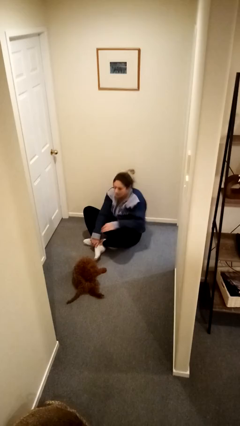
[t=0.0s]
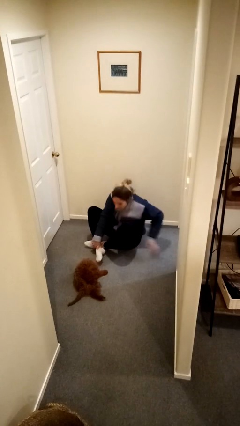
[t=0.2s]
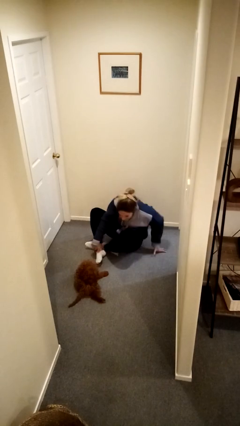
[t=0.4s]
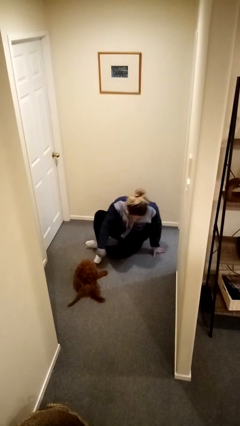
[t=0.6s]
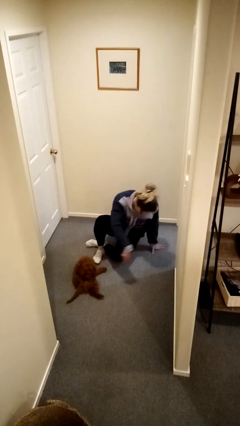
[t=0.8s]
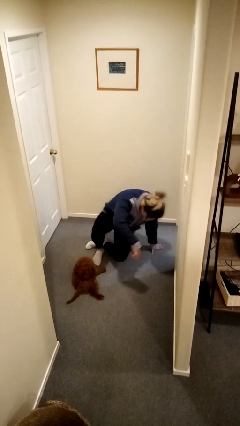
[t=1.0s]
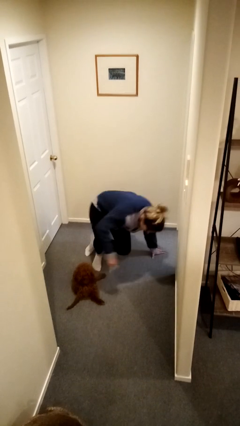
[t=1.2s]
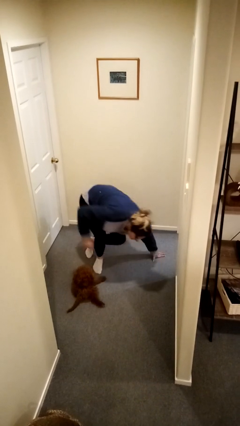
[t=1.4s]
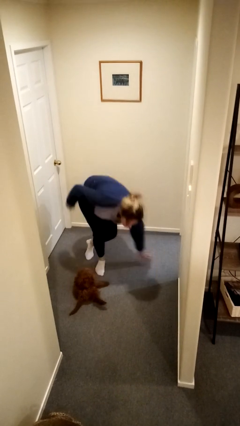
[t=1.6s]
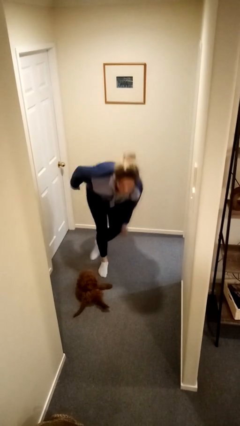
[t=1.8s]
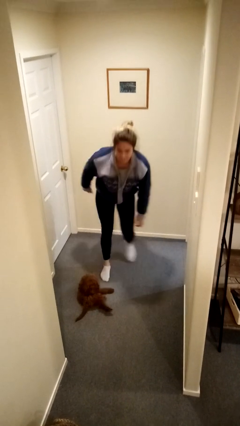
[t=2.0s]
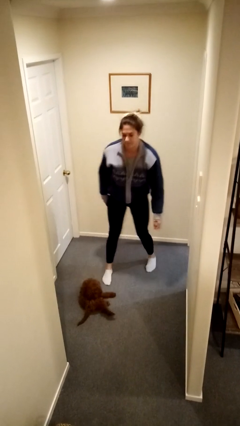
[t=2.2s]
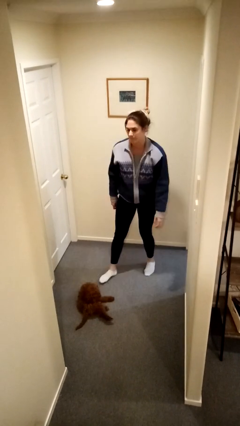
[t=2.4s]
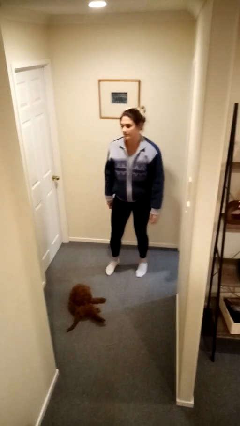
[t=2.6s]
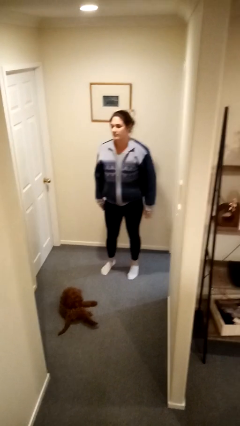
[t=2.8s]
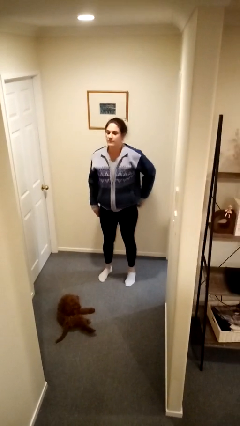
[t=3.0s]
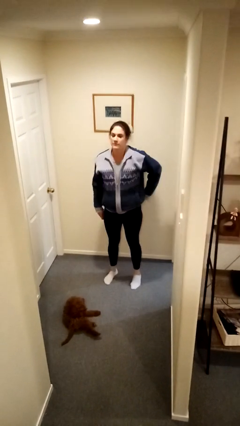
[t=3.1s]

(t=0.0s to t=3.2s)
person stands up from floor

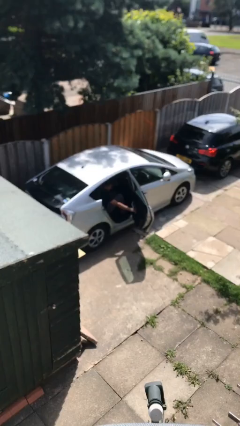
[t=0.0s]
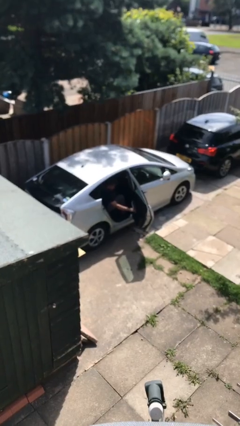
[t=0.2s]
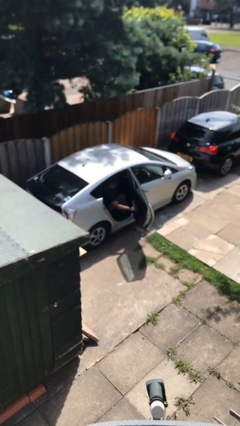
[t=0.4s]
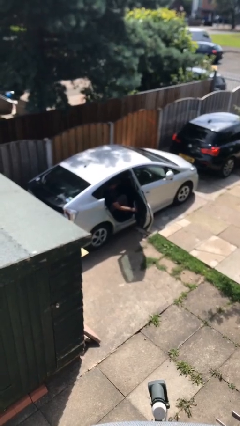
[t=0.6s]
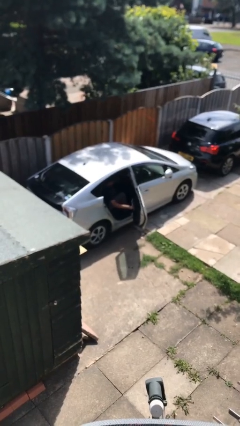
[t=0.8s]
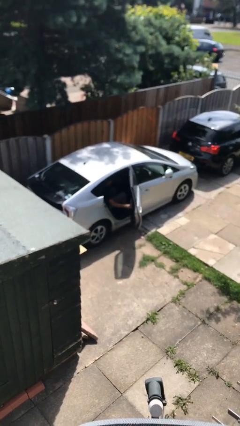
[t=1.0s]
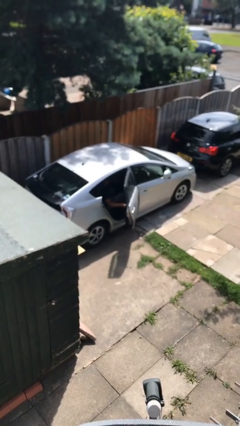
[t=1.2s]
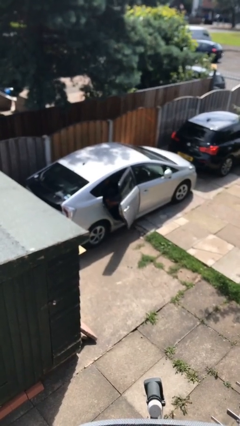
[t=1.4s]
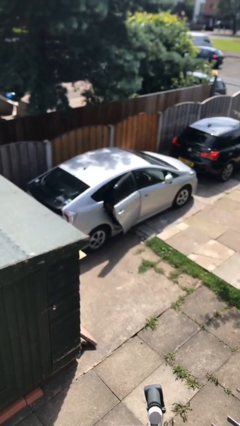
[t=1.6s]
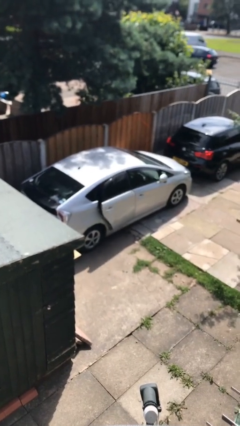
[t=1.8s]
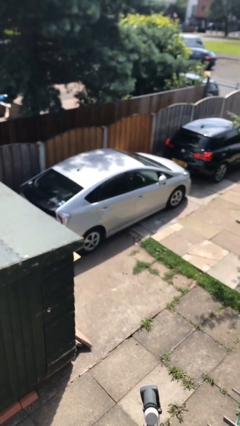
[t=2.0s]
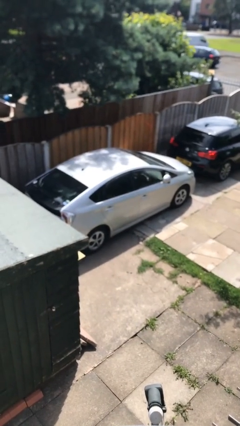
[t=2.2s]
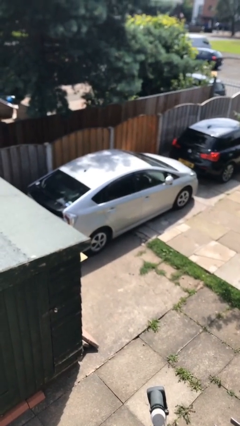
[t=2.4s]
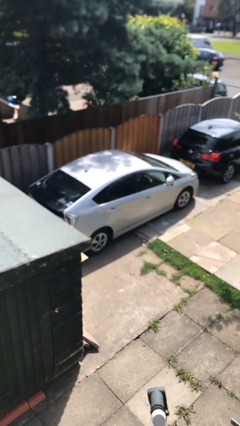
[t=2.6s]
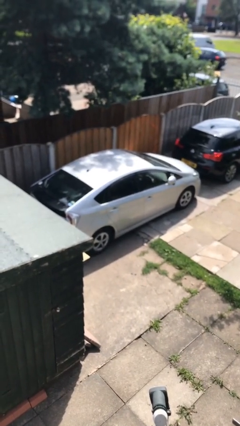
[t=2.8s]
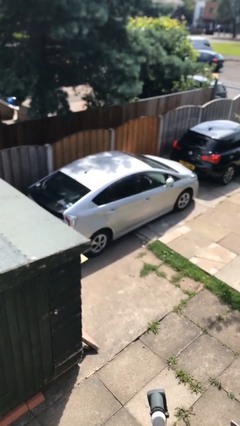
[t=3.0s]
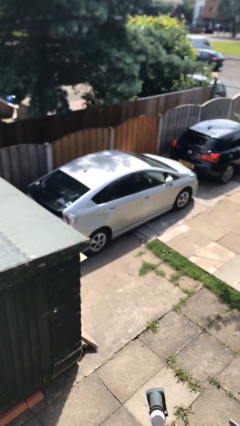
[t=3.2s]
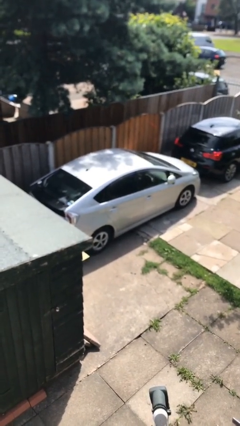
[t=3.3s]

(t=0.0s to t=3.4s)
person closes car door

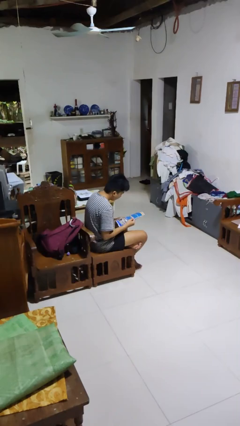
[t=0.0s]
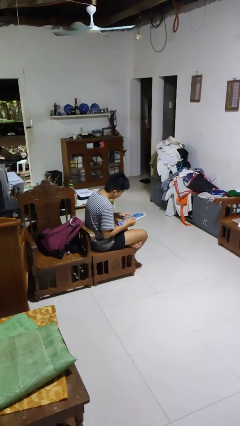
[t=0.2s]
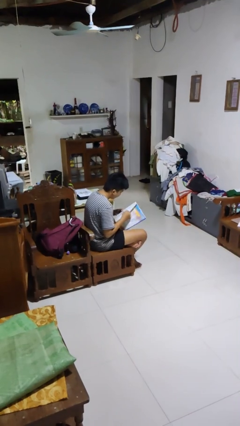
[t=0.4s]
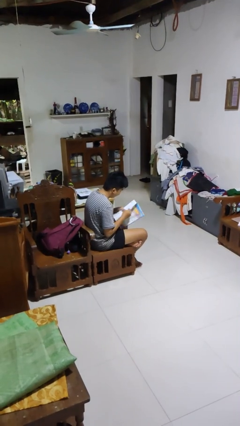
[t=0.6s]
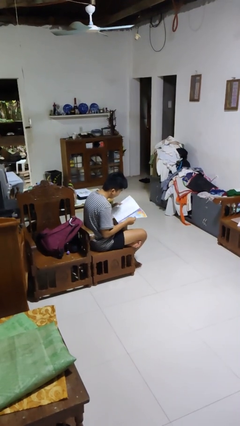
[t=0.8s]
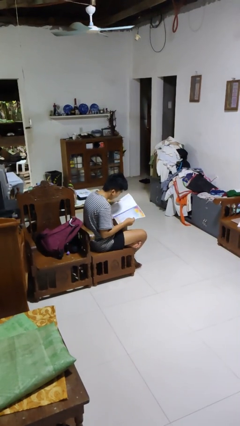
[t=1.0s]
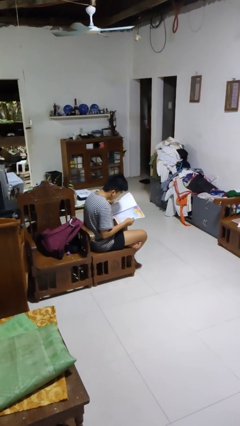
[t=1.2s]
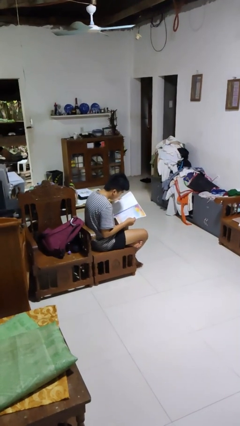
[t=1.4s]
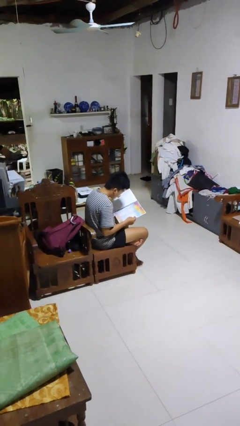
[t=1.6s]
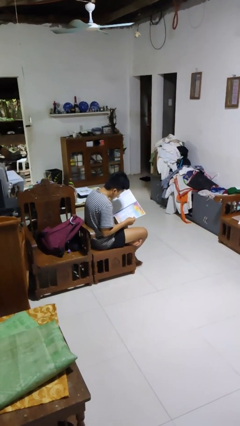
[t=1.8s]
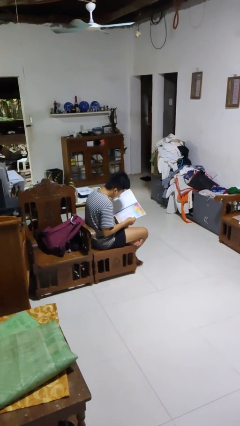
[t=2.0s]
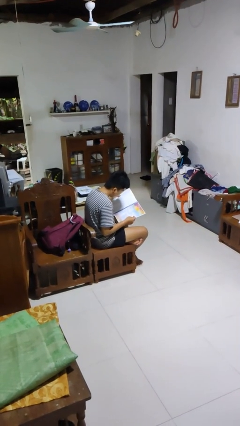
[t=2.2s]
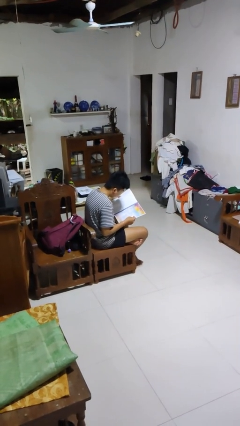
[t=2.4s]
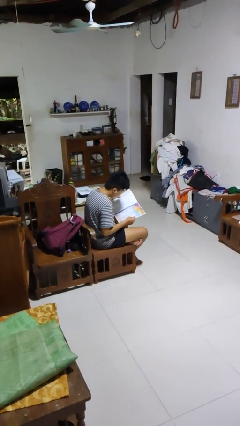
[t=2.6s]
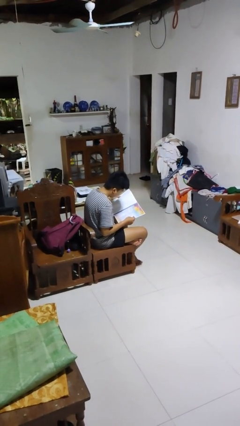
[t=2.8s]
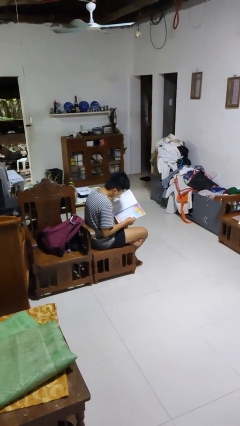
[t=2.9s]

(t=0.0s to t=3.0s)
person reads magazine

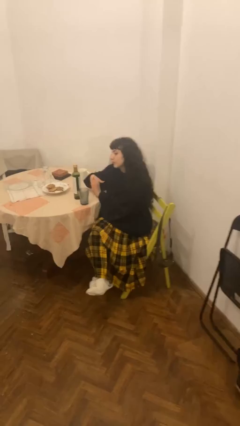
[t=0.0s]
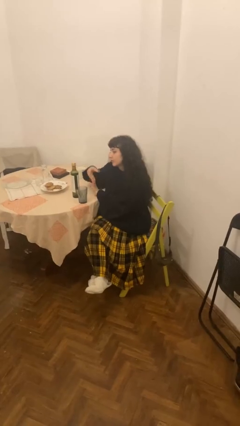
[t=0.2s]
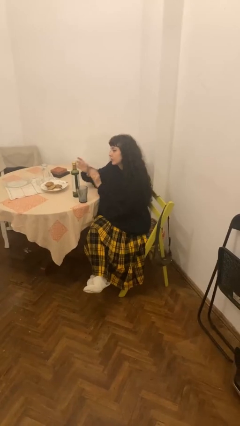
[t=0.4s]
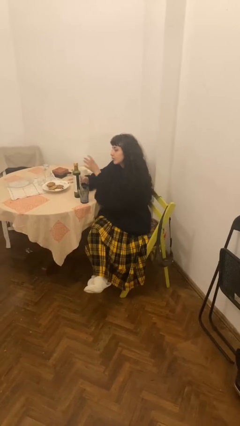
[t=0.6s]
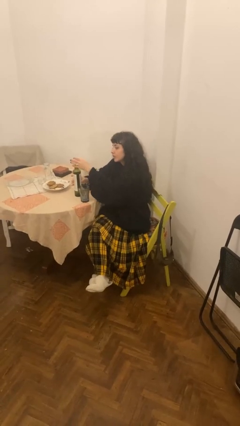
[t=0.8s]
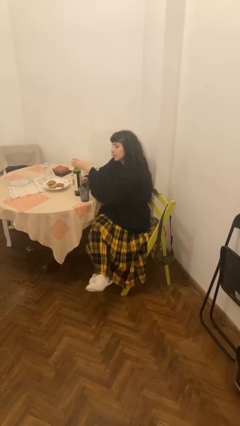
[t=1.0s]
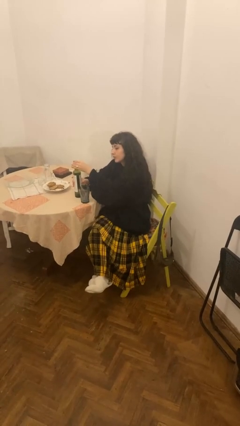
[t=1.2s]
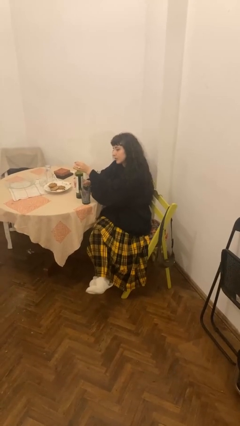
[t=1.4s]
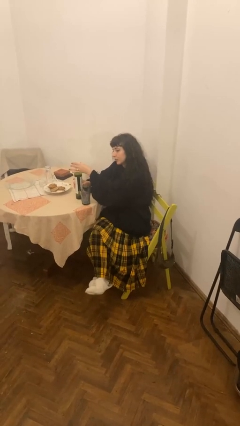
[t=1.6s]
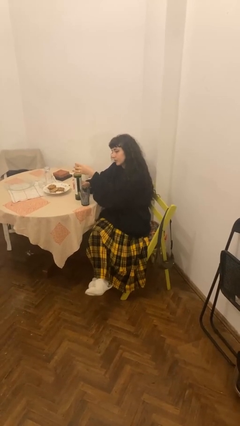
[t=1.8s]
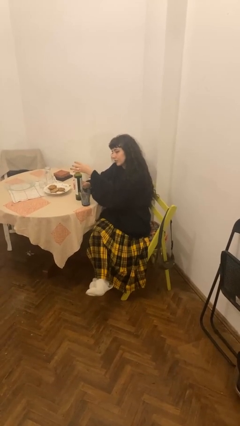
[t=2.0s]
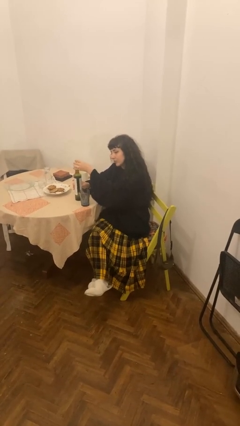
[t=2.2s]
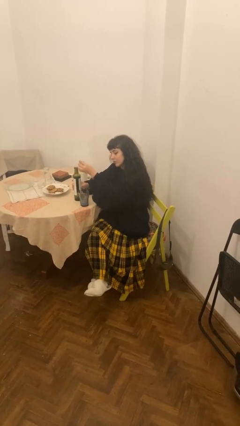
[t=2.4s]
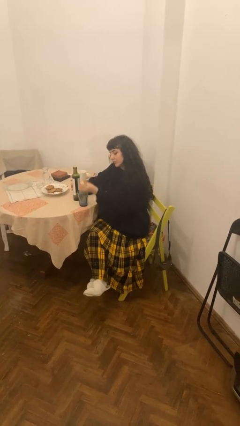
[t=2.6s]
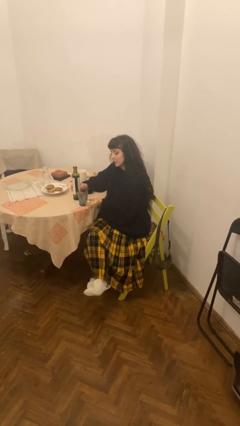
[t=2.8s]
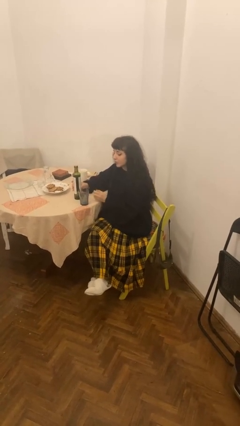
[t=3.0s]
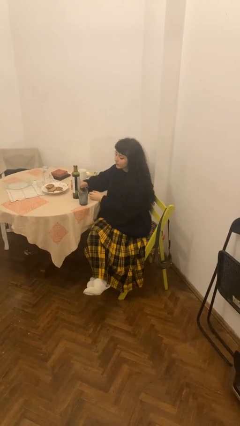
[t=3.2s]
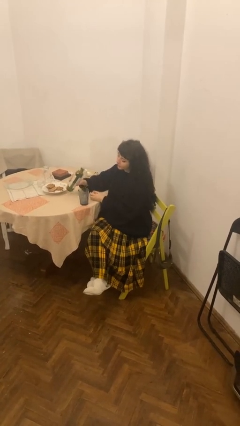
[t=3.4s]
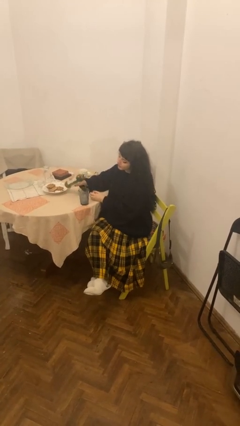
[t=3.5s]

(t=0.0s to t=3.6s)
person unscrews lid from bottle

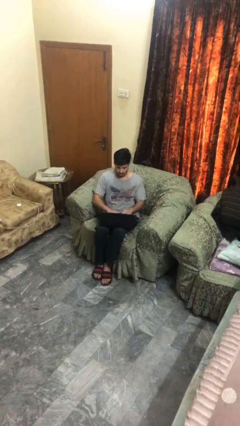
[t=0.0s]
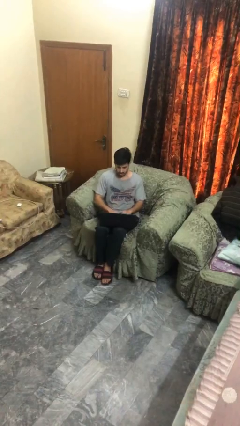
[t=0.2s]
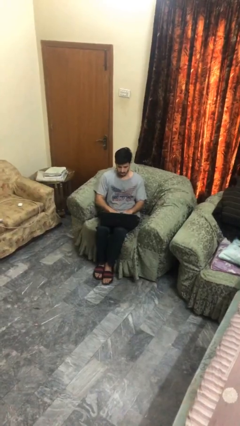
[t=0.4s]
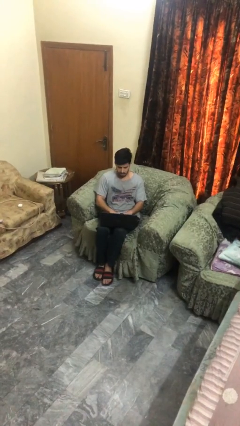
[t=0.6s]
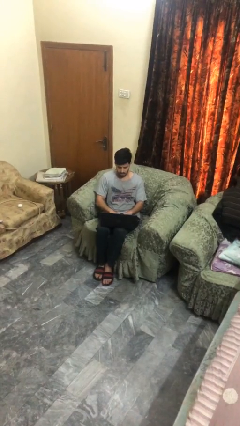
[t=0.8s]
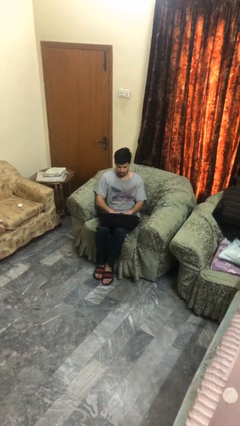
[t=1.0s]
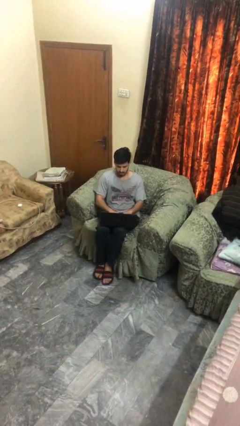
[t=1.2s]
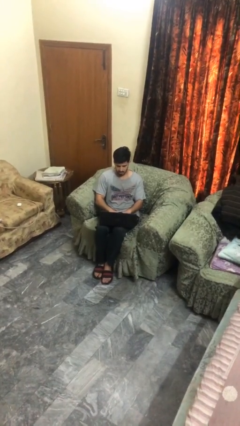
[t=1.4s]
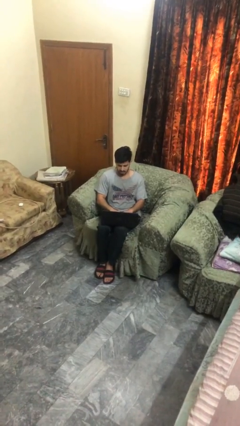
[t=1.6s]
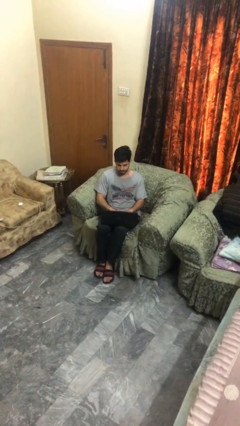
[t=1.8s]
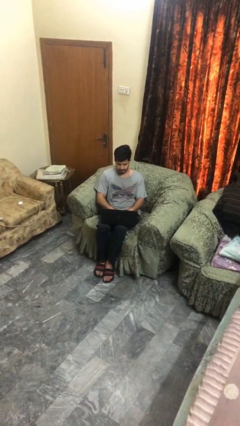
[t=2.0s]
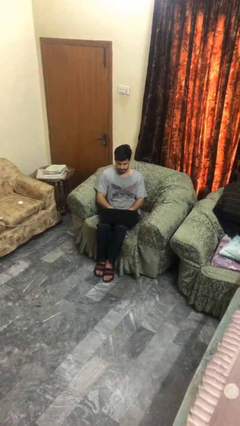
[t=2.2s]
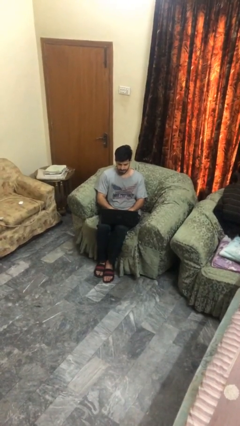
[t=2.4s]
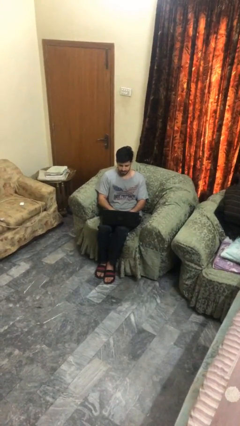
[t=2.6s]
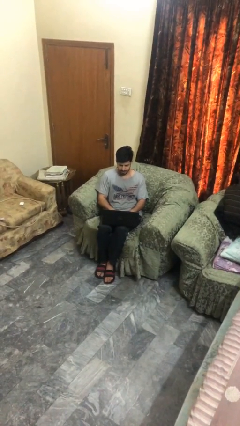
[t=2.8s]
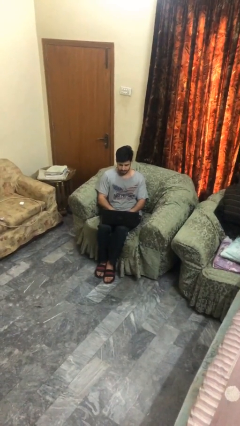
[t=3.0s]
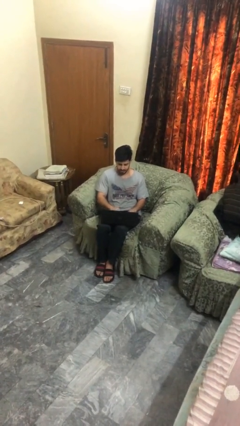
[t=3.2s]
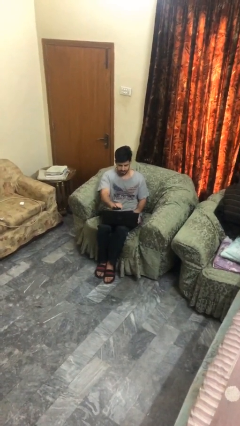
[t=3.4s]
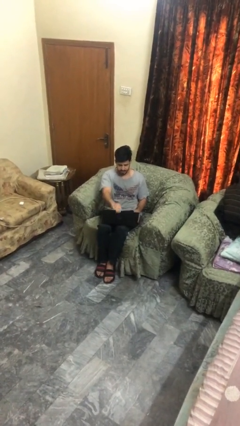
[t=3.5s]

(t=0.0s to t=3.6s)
person interacts with laptop

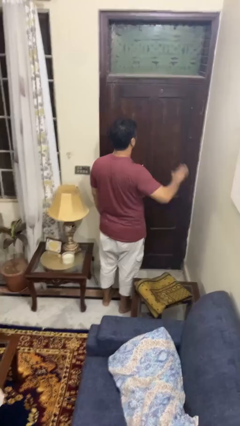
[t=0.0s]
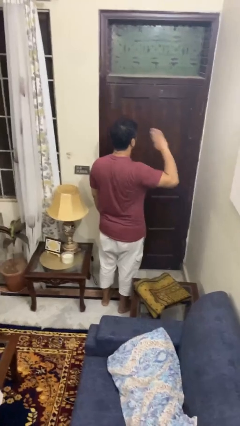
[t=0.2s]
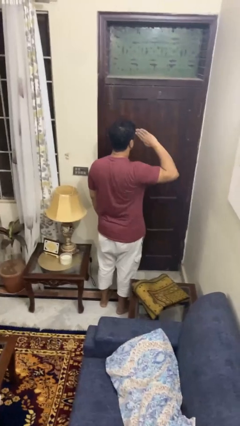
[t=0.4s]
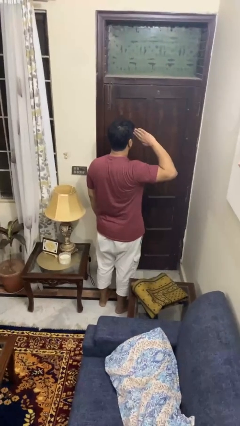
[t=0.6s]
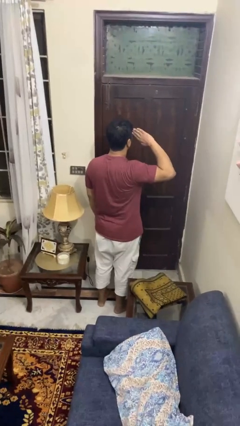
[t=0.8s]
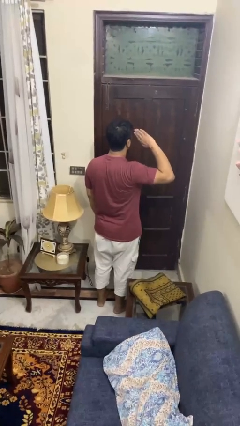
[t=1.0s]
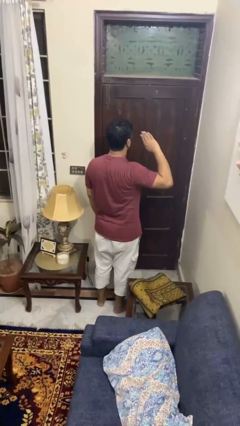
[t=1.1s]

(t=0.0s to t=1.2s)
person salutes
